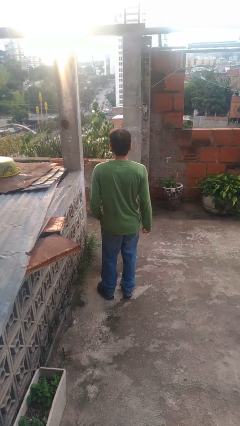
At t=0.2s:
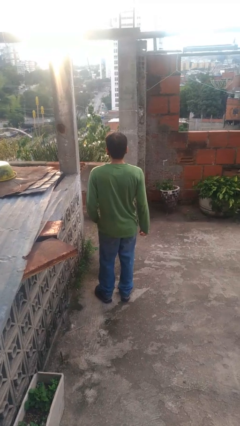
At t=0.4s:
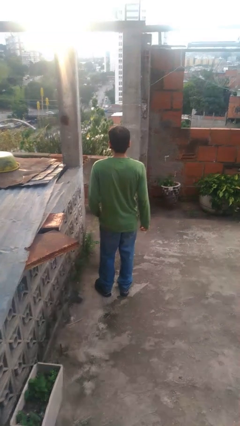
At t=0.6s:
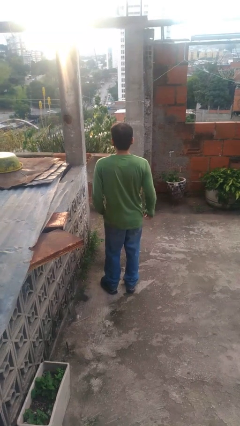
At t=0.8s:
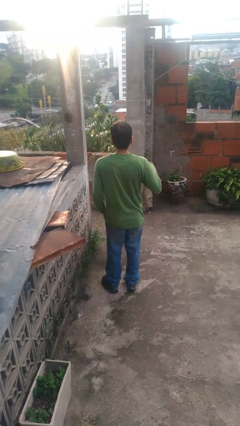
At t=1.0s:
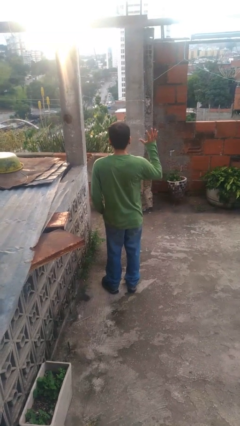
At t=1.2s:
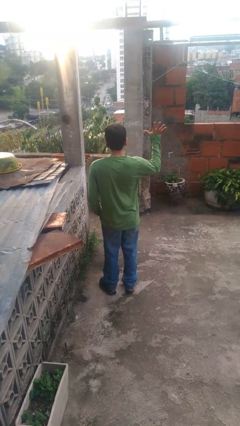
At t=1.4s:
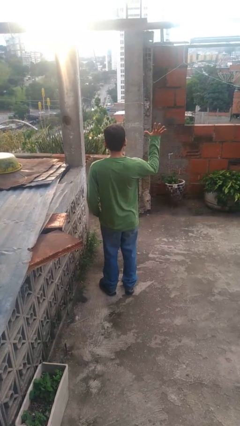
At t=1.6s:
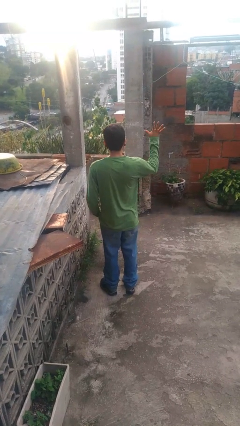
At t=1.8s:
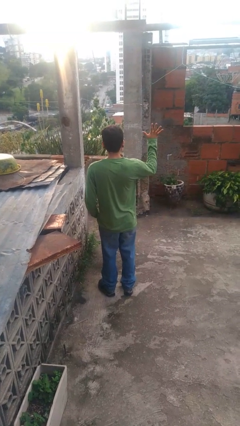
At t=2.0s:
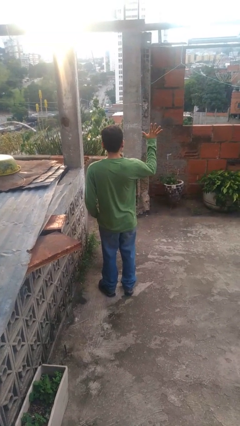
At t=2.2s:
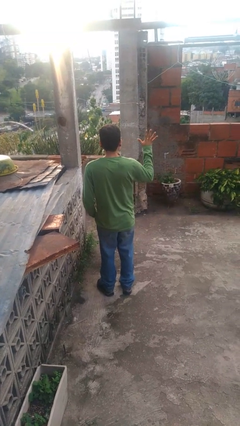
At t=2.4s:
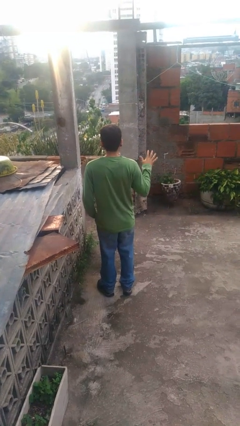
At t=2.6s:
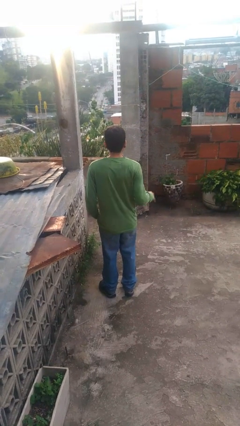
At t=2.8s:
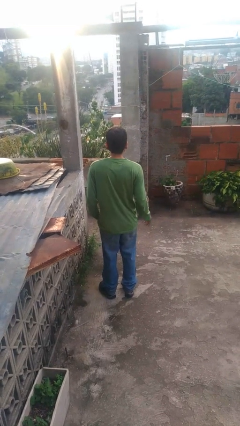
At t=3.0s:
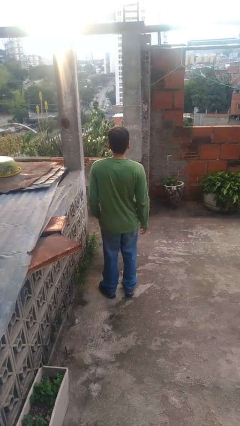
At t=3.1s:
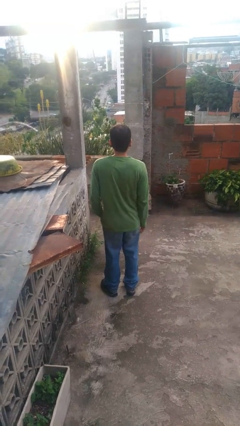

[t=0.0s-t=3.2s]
person gestures number five

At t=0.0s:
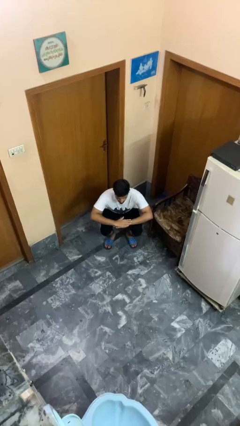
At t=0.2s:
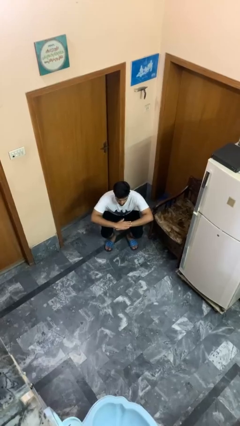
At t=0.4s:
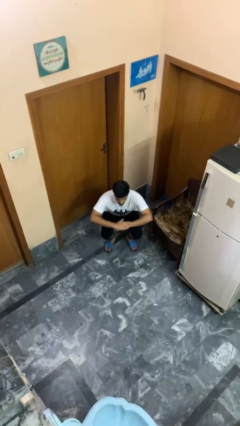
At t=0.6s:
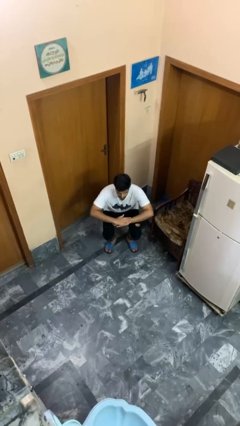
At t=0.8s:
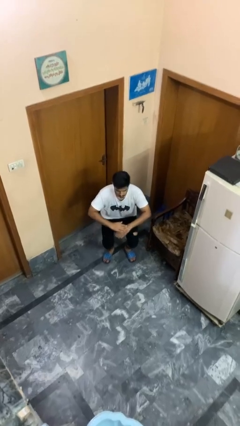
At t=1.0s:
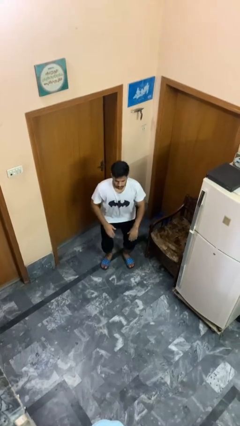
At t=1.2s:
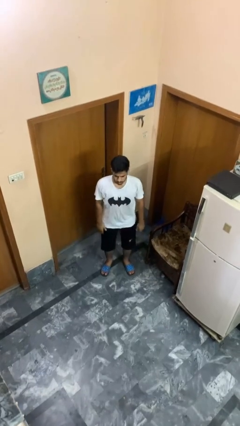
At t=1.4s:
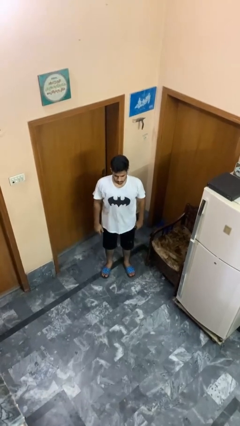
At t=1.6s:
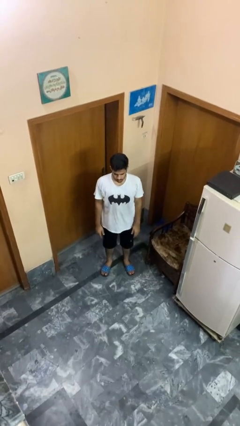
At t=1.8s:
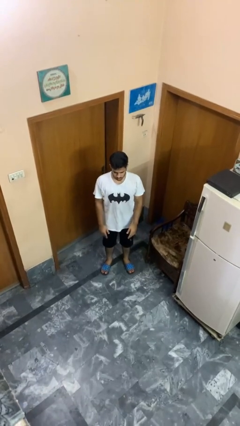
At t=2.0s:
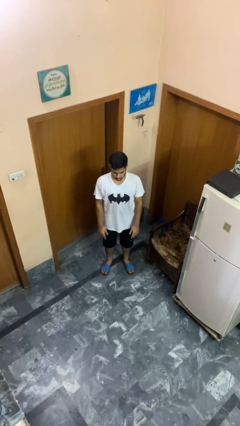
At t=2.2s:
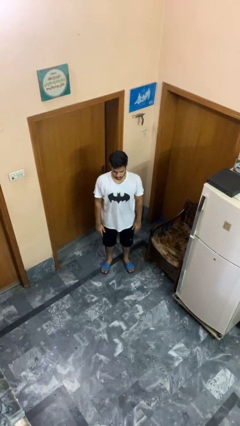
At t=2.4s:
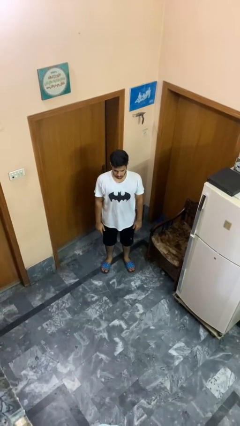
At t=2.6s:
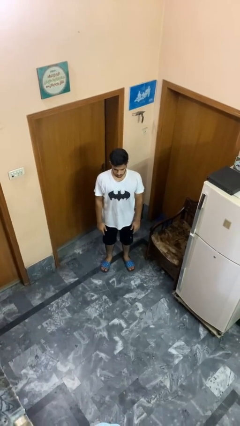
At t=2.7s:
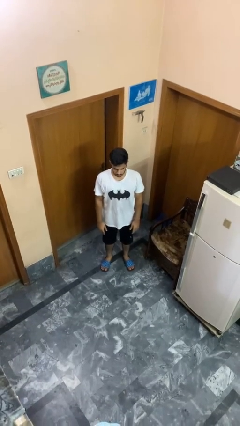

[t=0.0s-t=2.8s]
person stands up

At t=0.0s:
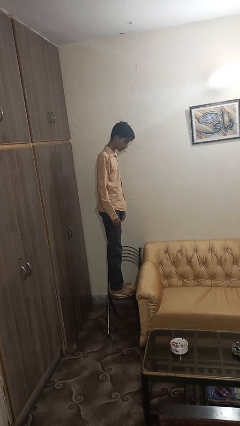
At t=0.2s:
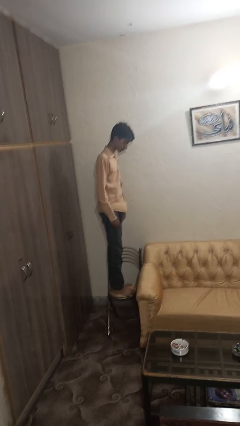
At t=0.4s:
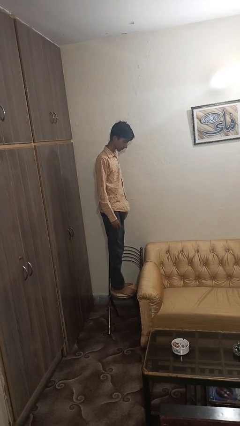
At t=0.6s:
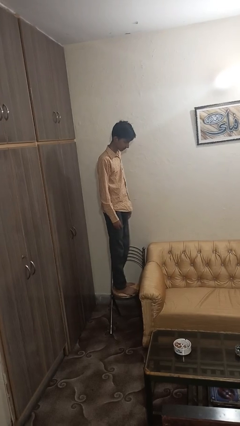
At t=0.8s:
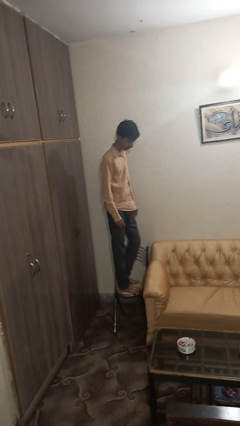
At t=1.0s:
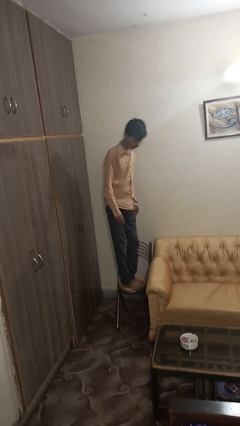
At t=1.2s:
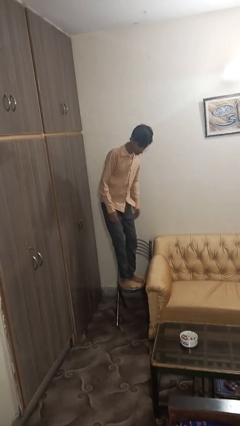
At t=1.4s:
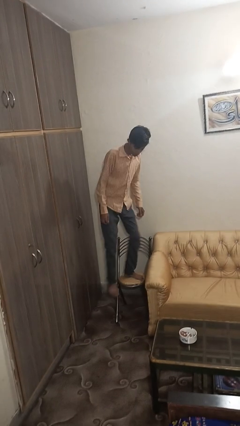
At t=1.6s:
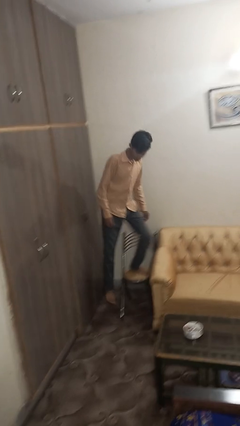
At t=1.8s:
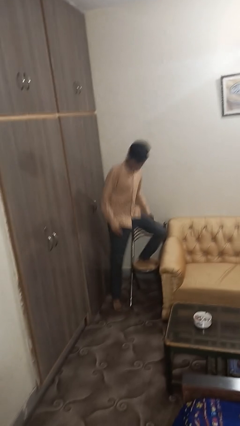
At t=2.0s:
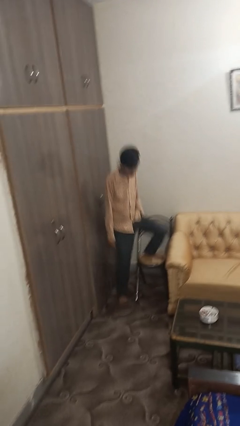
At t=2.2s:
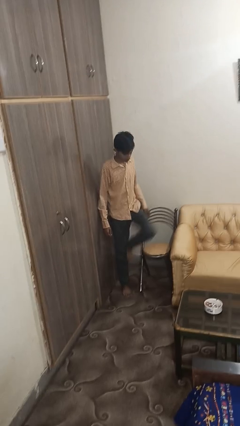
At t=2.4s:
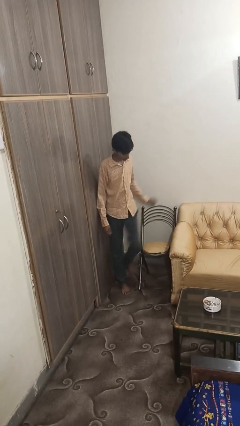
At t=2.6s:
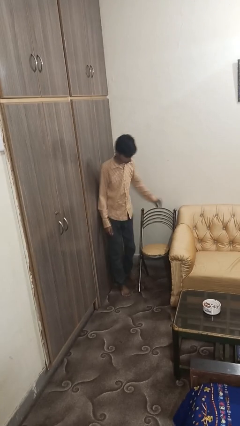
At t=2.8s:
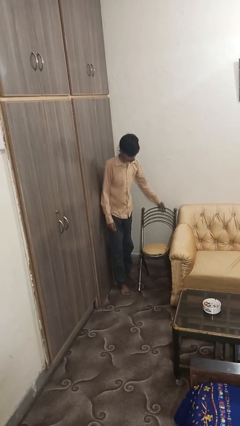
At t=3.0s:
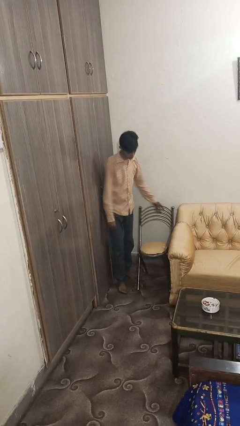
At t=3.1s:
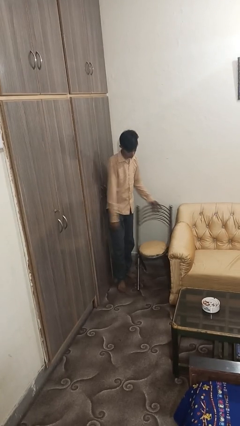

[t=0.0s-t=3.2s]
person climbs off chair

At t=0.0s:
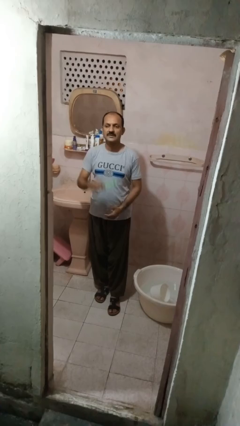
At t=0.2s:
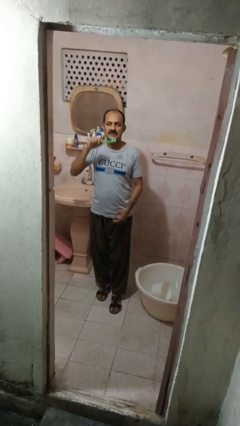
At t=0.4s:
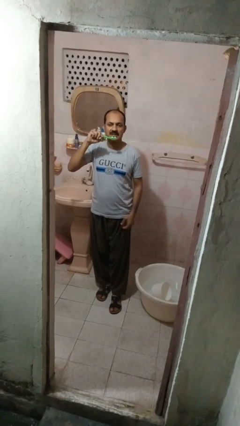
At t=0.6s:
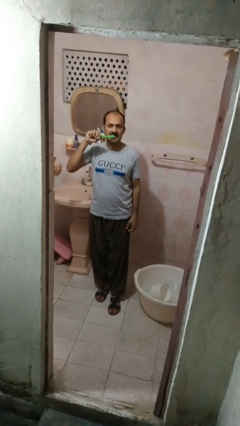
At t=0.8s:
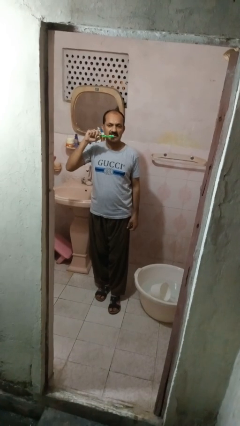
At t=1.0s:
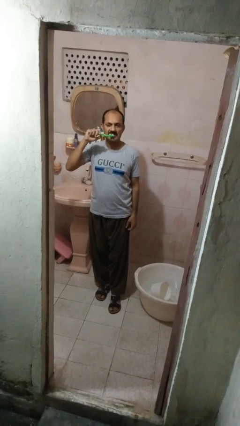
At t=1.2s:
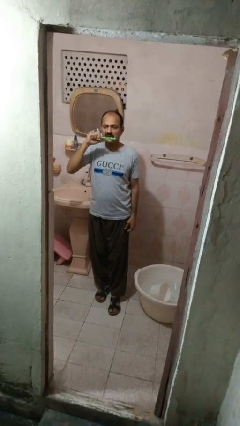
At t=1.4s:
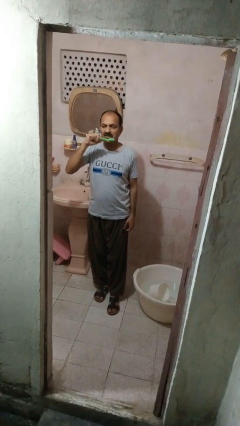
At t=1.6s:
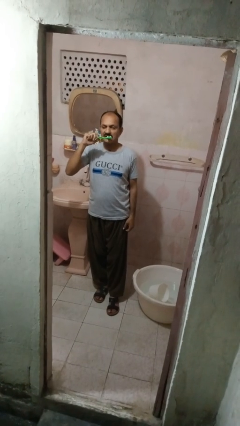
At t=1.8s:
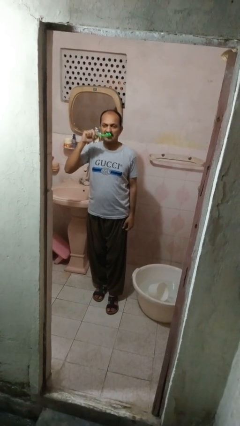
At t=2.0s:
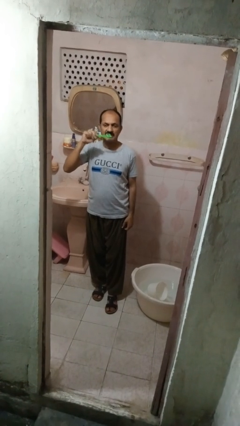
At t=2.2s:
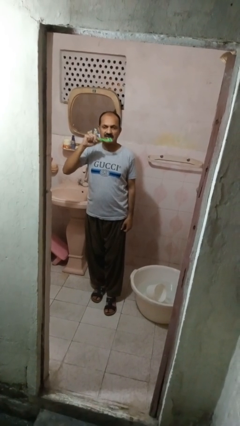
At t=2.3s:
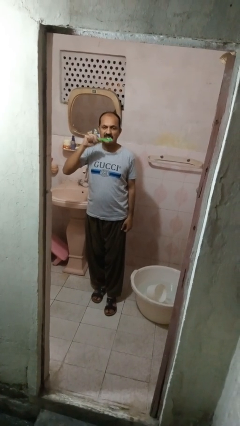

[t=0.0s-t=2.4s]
person brushes teeth

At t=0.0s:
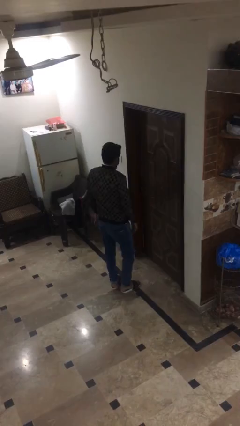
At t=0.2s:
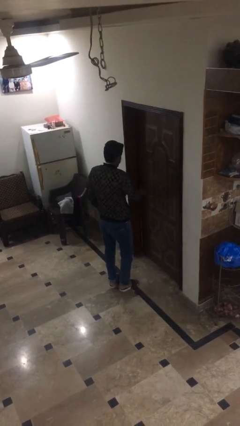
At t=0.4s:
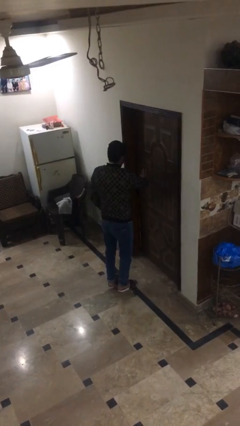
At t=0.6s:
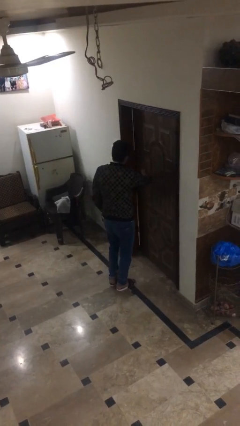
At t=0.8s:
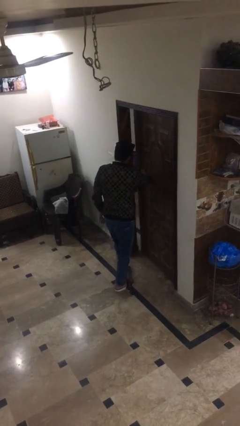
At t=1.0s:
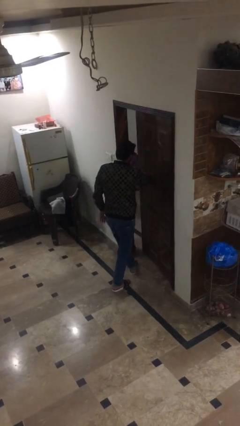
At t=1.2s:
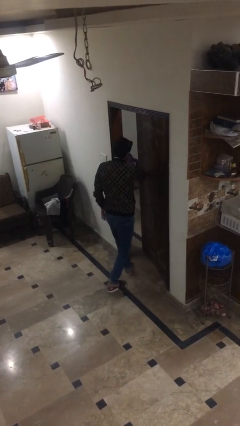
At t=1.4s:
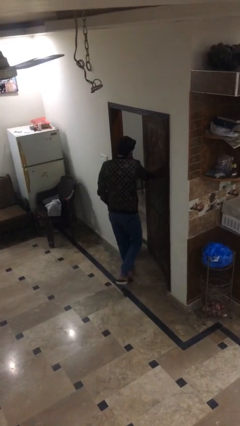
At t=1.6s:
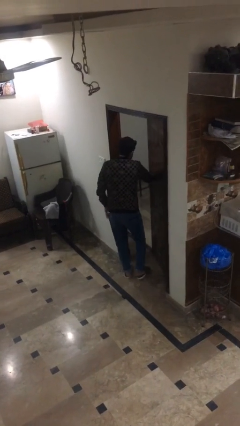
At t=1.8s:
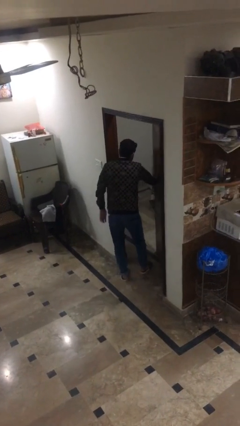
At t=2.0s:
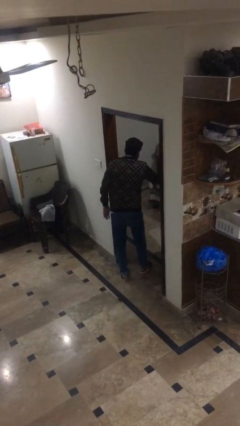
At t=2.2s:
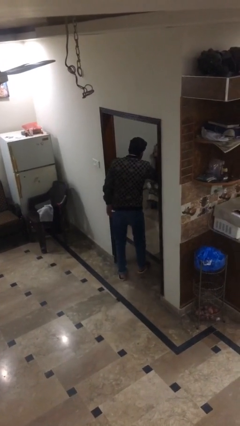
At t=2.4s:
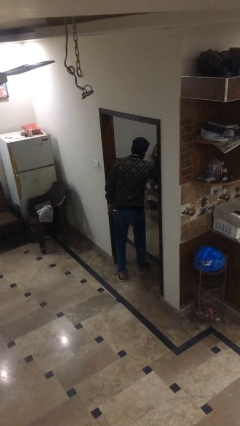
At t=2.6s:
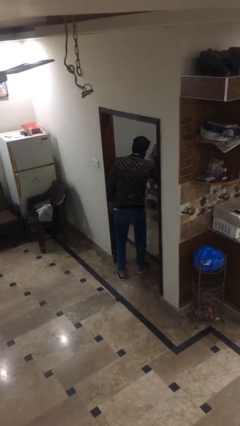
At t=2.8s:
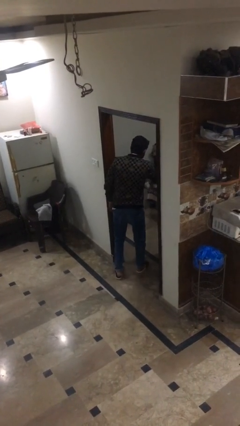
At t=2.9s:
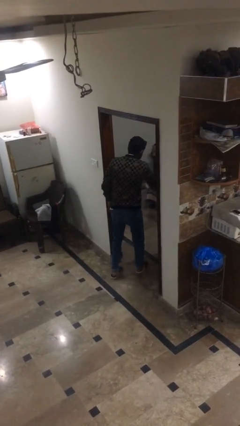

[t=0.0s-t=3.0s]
person opens facility door

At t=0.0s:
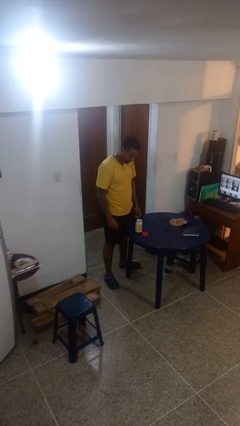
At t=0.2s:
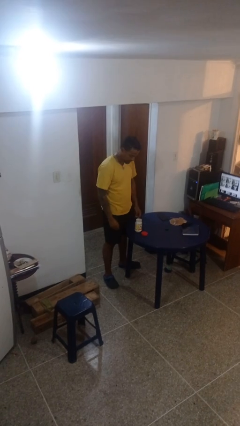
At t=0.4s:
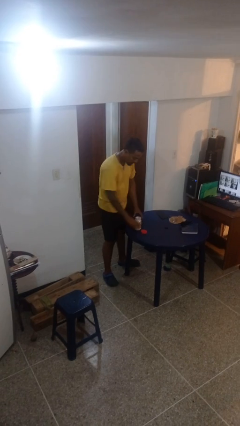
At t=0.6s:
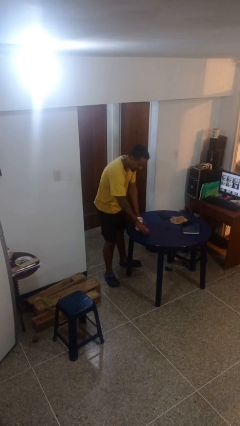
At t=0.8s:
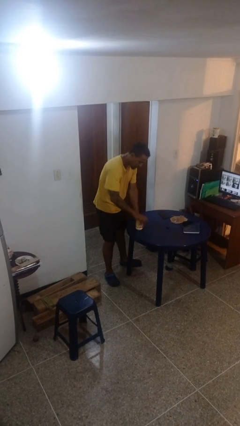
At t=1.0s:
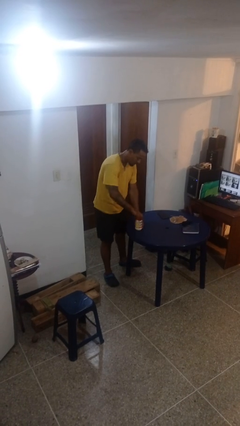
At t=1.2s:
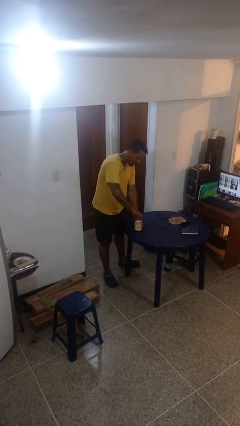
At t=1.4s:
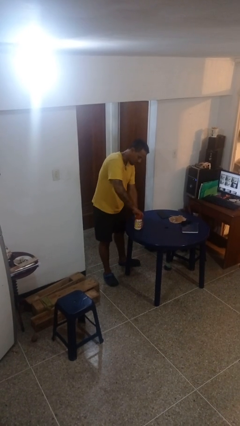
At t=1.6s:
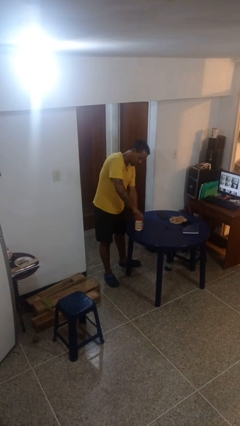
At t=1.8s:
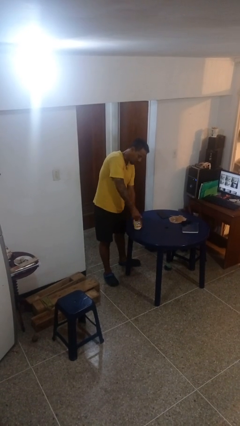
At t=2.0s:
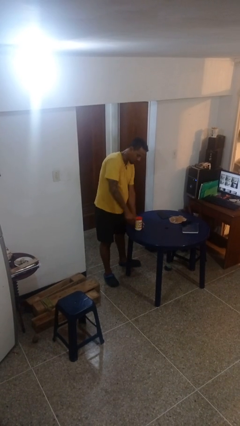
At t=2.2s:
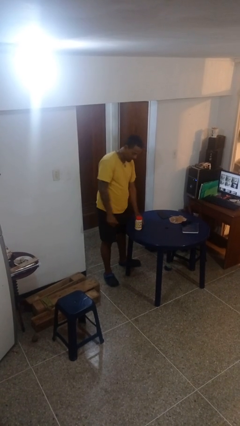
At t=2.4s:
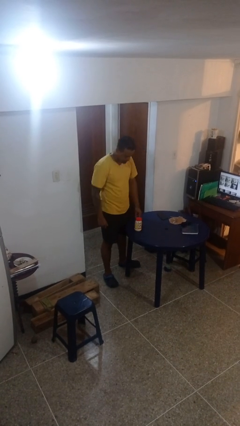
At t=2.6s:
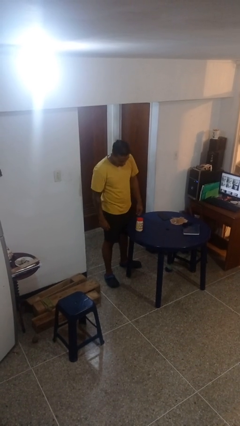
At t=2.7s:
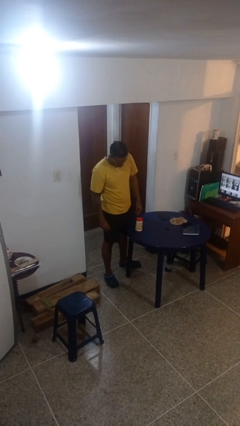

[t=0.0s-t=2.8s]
person closes jar
